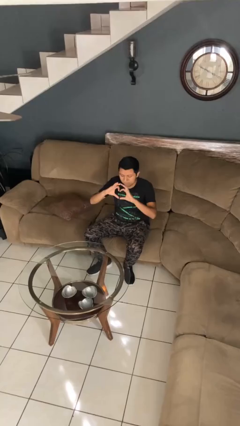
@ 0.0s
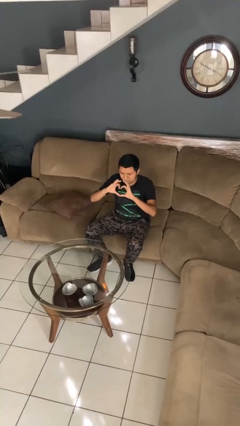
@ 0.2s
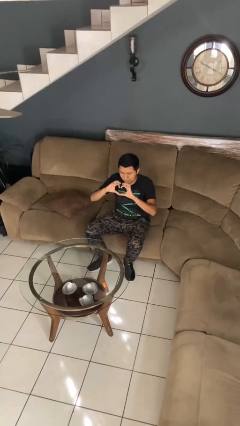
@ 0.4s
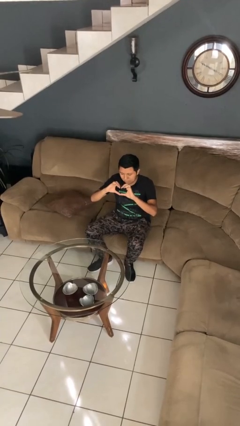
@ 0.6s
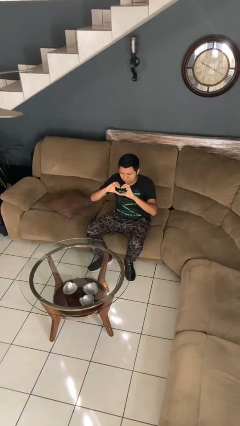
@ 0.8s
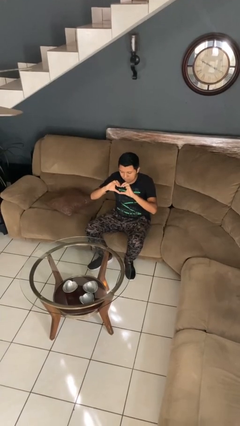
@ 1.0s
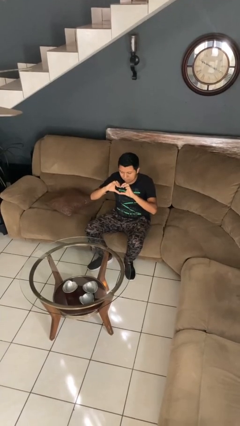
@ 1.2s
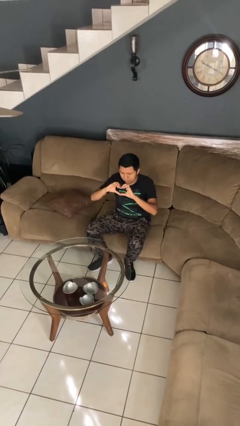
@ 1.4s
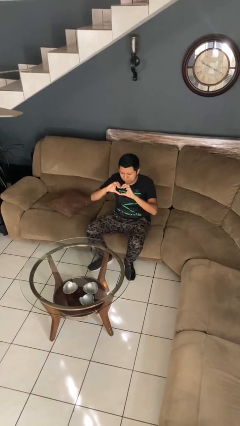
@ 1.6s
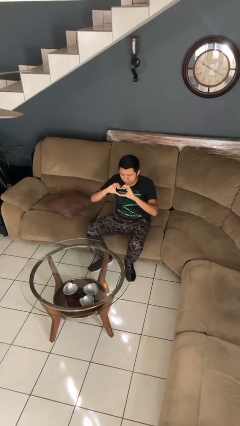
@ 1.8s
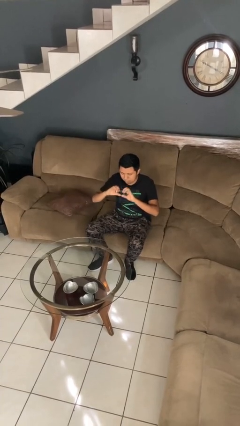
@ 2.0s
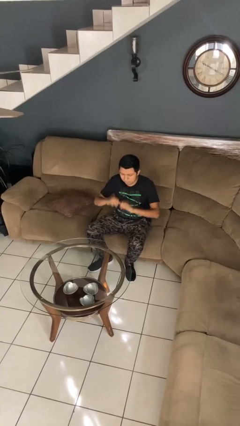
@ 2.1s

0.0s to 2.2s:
person gestures heart

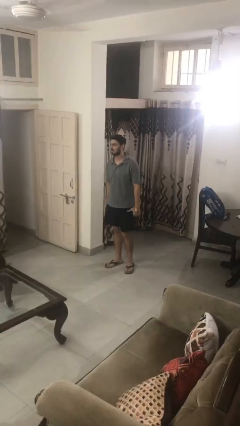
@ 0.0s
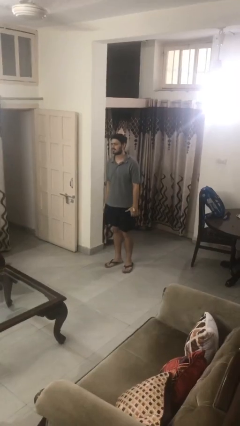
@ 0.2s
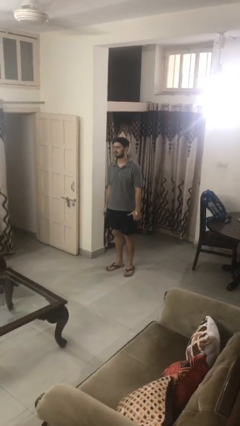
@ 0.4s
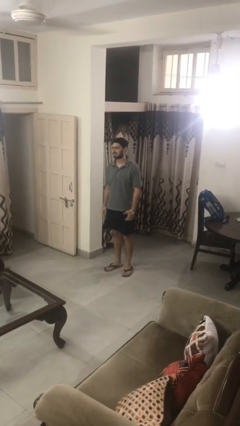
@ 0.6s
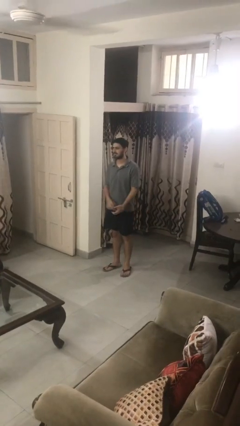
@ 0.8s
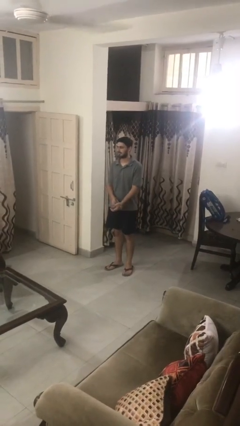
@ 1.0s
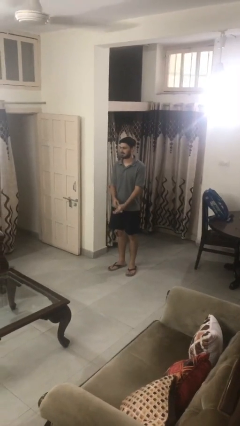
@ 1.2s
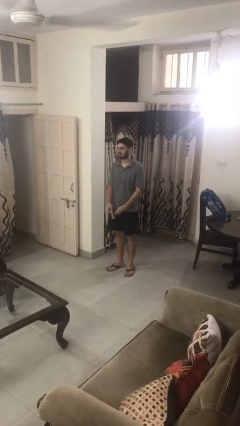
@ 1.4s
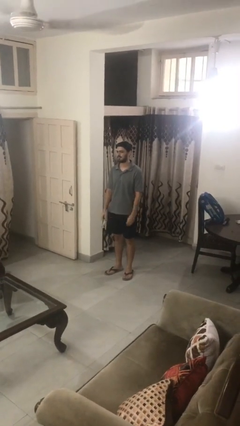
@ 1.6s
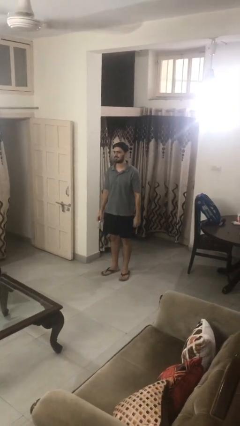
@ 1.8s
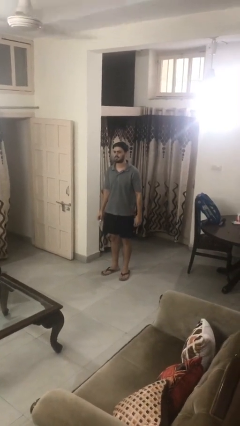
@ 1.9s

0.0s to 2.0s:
person takes off wristwatch

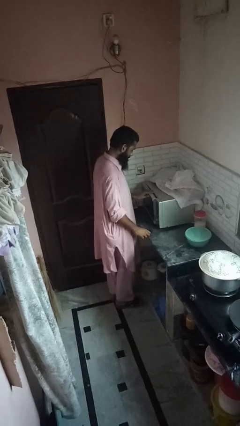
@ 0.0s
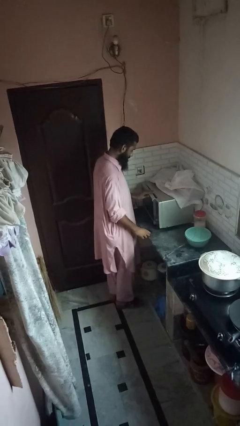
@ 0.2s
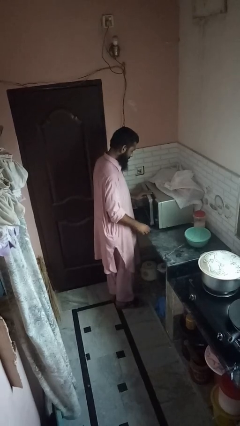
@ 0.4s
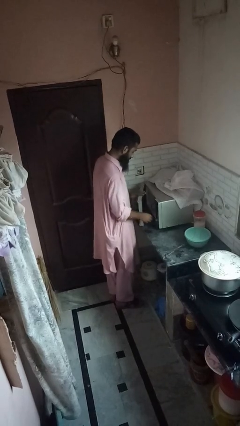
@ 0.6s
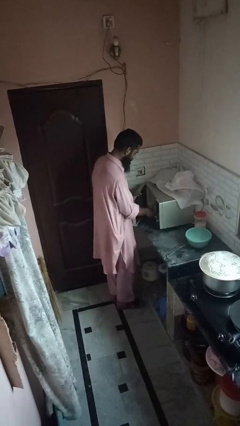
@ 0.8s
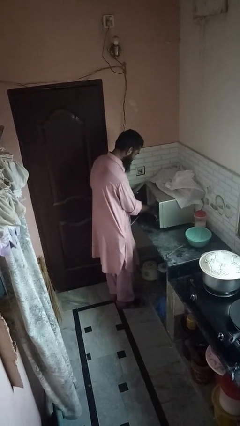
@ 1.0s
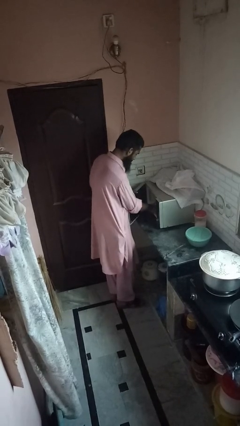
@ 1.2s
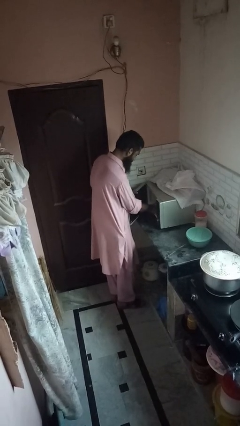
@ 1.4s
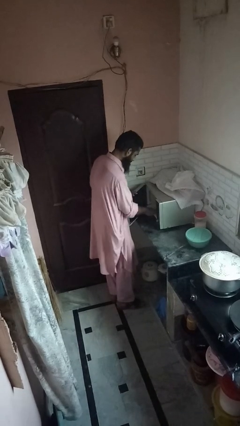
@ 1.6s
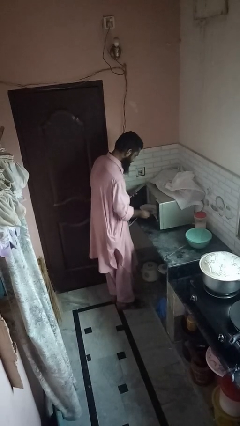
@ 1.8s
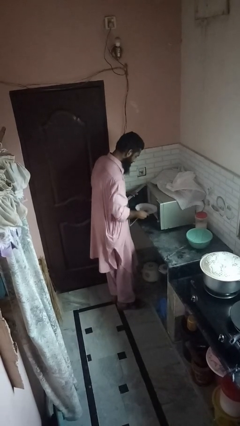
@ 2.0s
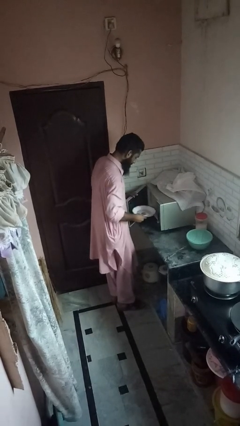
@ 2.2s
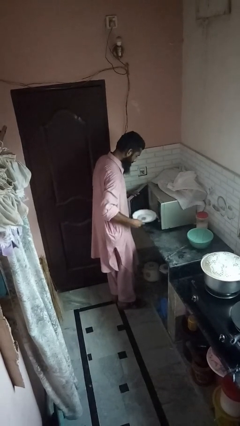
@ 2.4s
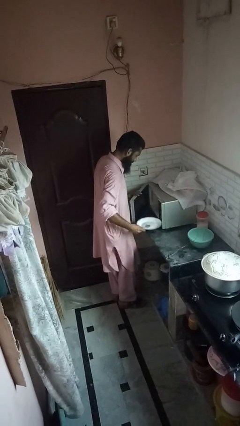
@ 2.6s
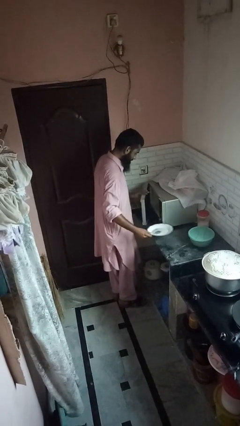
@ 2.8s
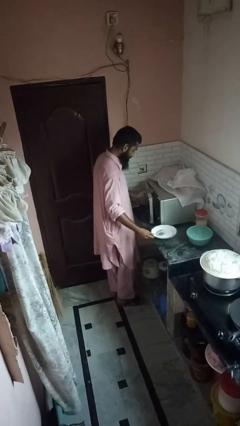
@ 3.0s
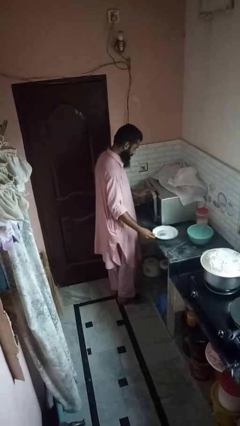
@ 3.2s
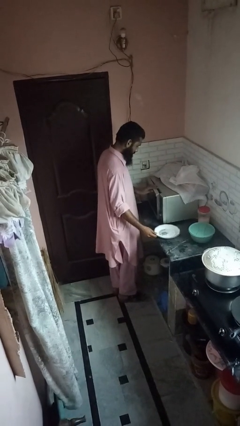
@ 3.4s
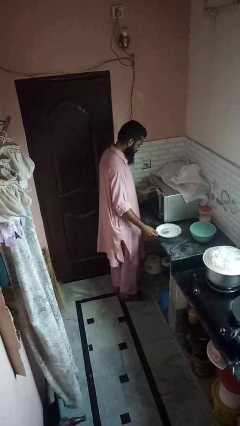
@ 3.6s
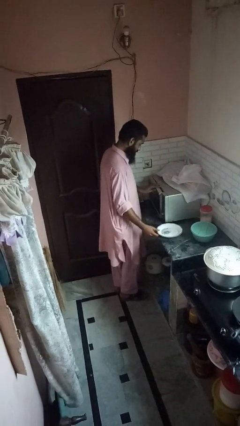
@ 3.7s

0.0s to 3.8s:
person takes object from oven

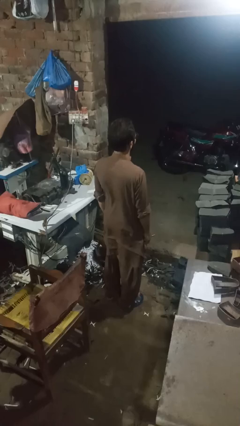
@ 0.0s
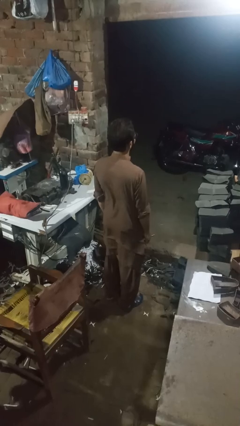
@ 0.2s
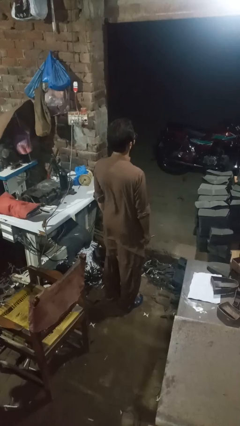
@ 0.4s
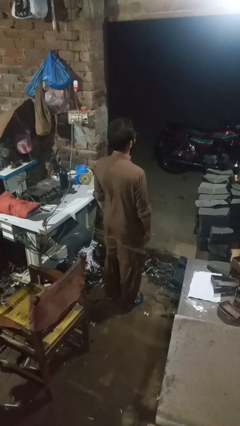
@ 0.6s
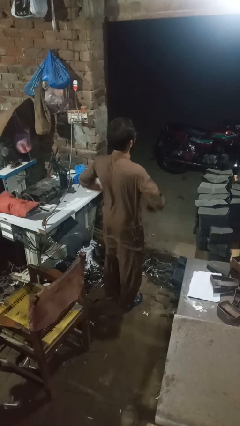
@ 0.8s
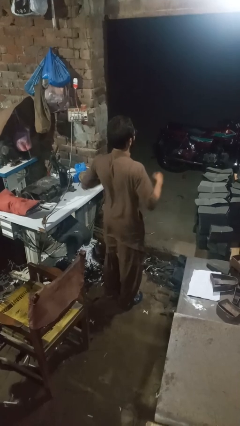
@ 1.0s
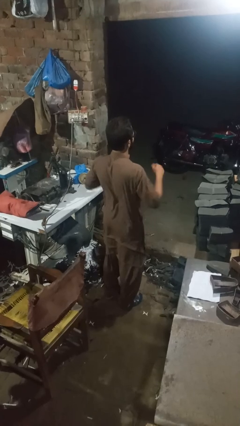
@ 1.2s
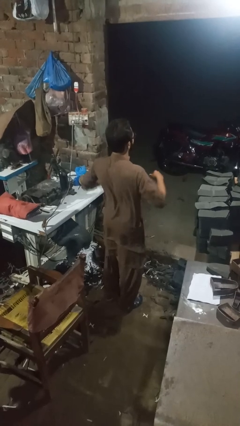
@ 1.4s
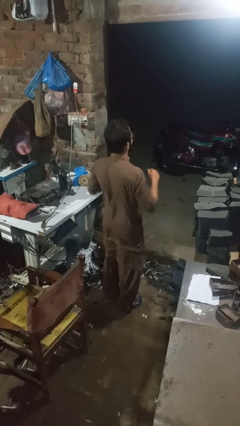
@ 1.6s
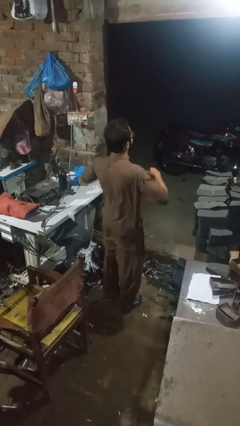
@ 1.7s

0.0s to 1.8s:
person dances in place

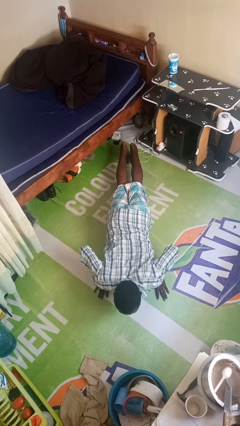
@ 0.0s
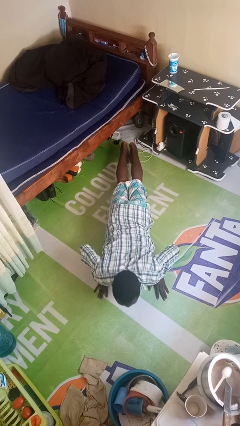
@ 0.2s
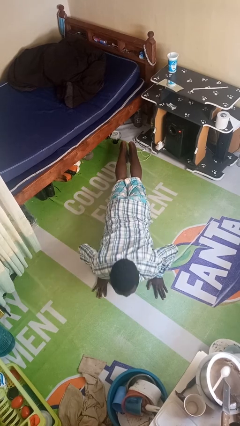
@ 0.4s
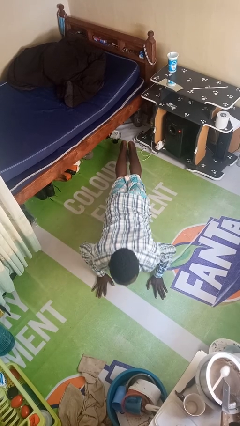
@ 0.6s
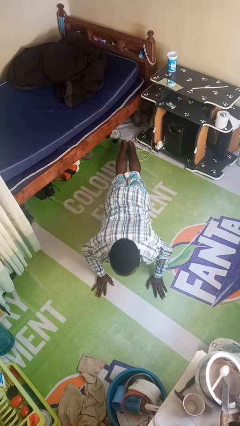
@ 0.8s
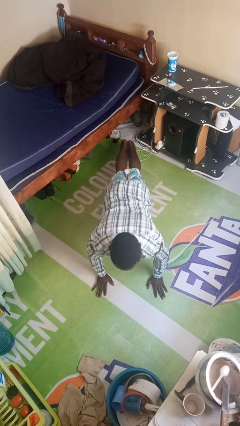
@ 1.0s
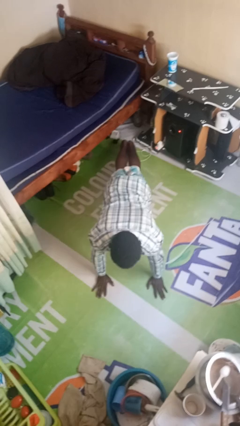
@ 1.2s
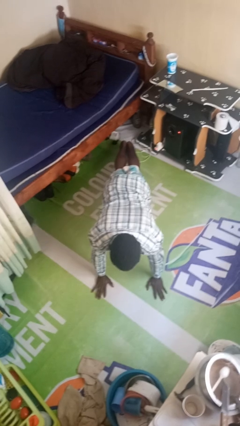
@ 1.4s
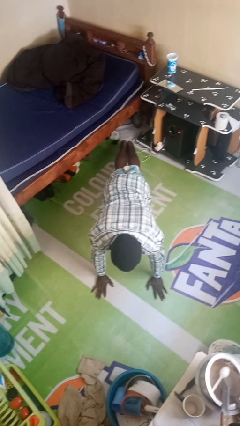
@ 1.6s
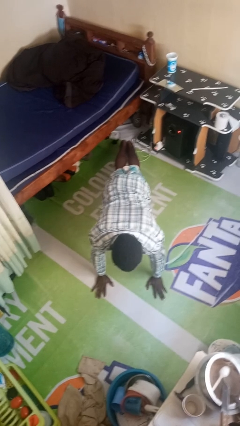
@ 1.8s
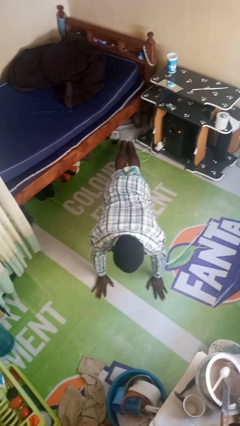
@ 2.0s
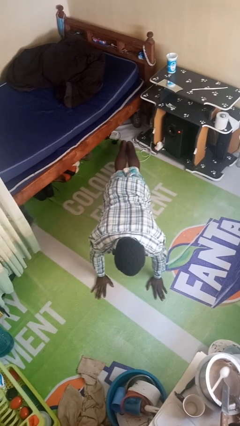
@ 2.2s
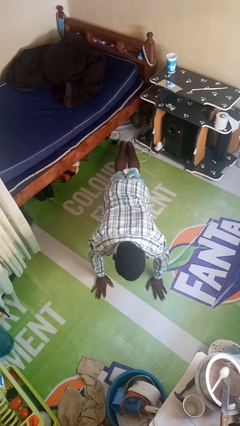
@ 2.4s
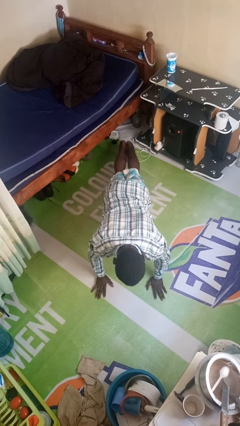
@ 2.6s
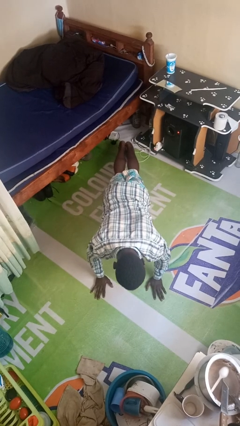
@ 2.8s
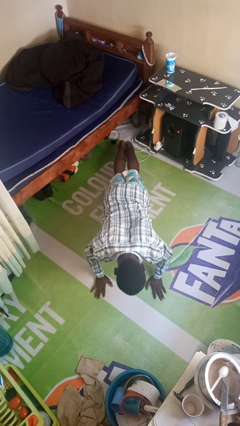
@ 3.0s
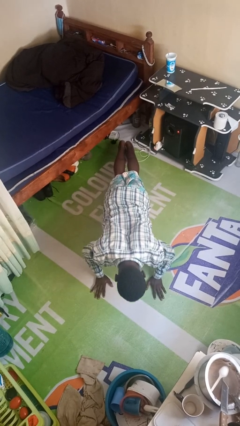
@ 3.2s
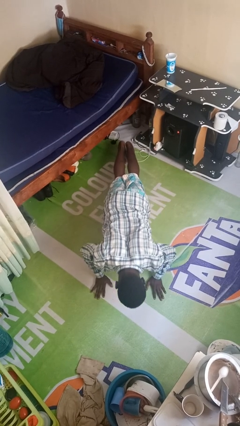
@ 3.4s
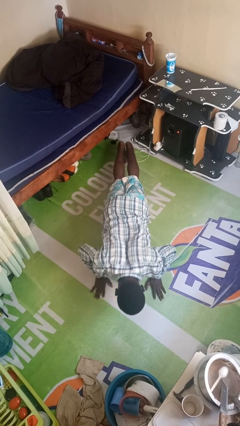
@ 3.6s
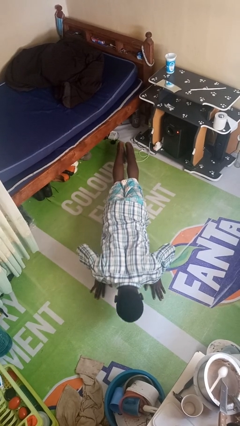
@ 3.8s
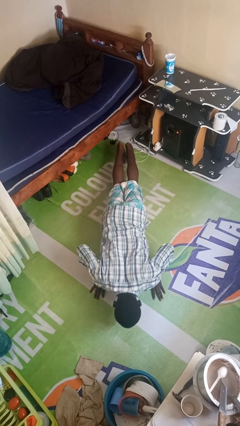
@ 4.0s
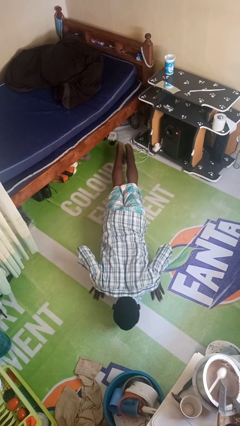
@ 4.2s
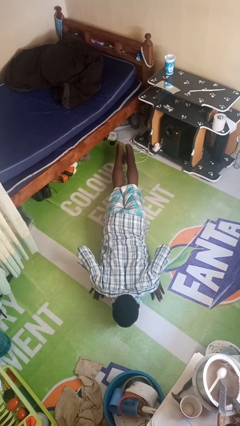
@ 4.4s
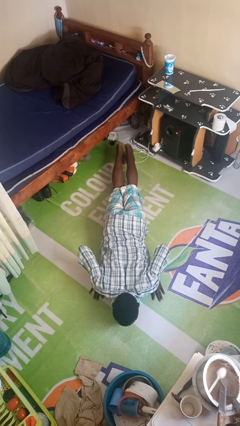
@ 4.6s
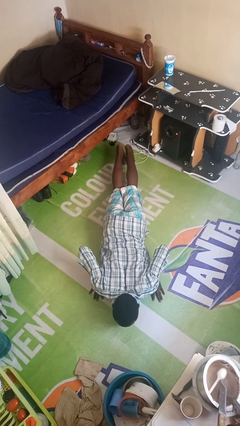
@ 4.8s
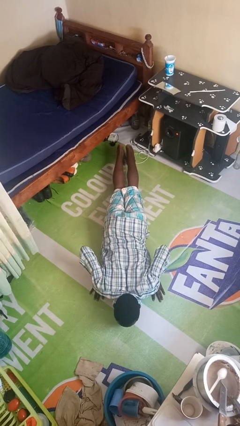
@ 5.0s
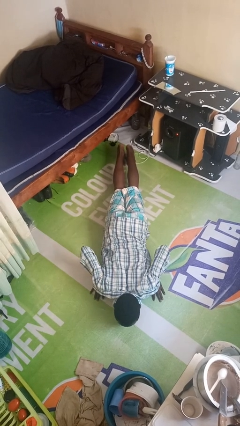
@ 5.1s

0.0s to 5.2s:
person exercises with pushup

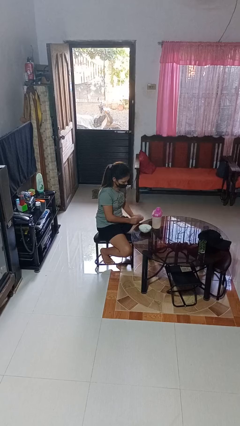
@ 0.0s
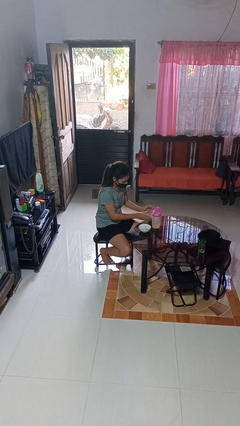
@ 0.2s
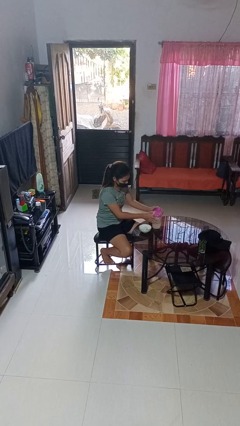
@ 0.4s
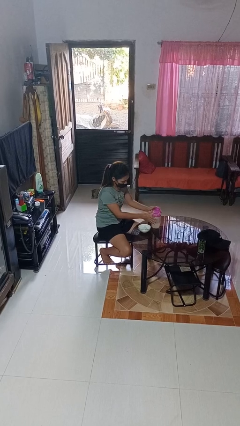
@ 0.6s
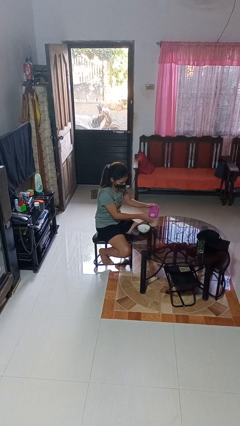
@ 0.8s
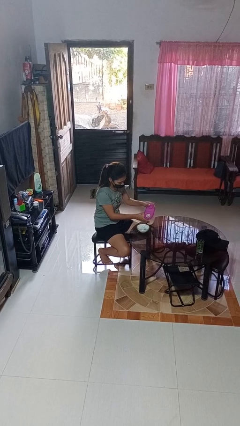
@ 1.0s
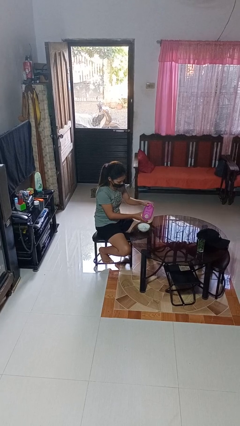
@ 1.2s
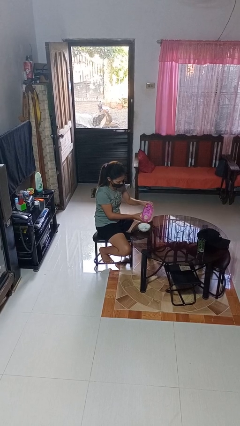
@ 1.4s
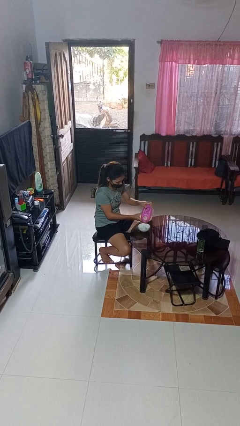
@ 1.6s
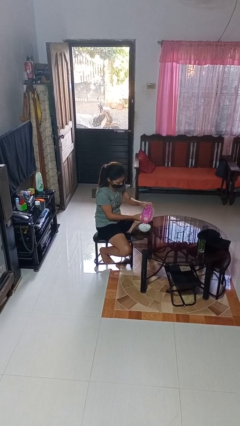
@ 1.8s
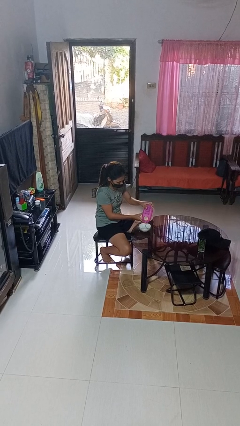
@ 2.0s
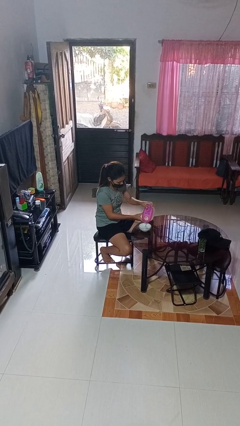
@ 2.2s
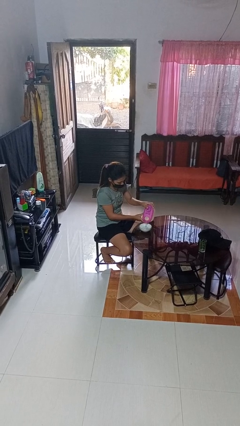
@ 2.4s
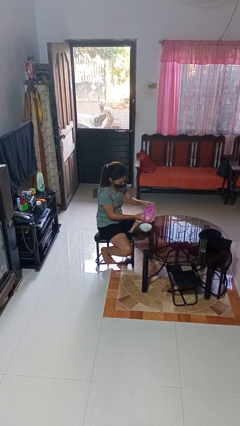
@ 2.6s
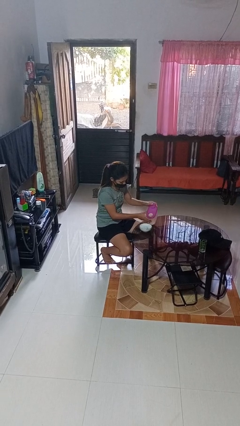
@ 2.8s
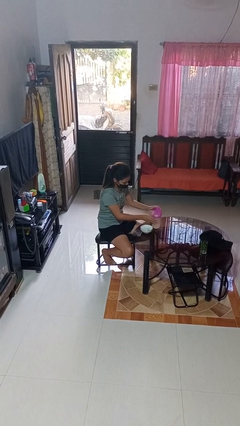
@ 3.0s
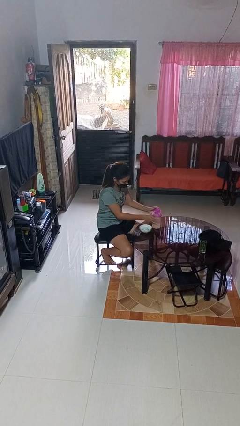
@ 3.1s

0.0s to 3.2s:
person pours into bowl
